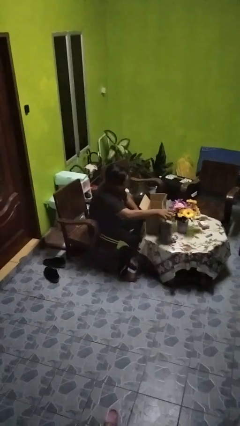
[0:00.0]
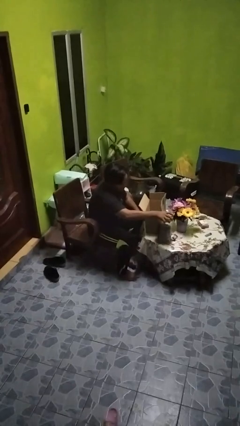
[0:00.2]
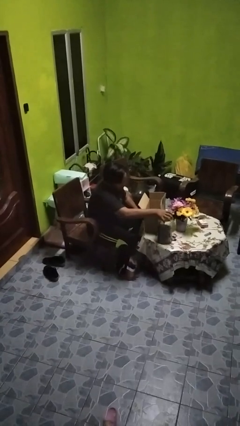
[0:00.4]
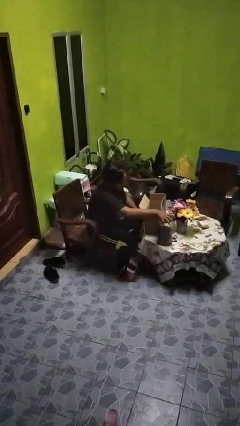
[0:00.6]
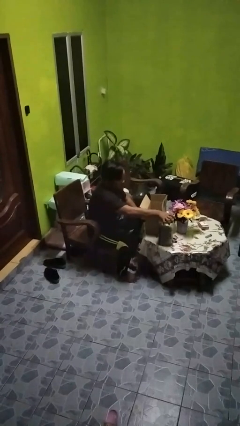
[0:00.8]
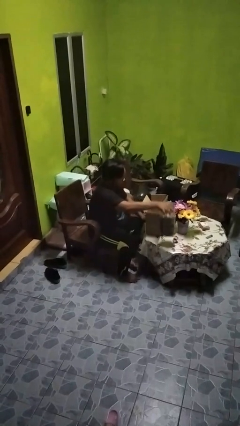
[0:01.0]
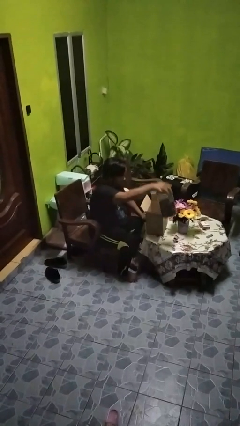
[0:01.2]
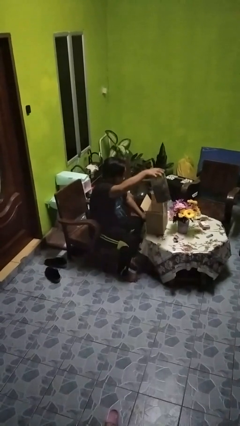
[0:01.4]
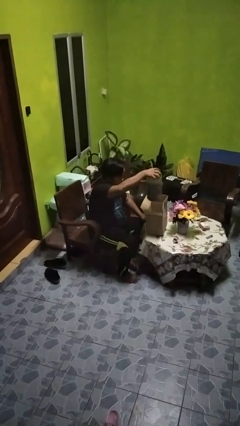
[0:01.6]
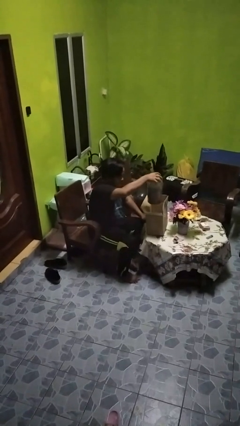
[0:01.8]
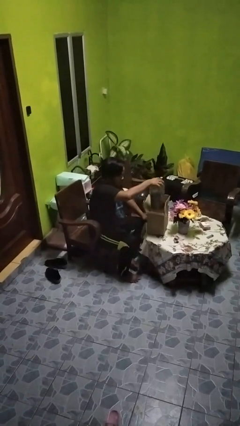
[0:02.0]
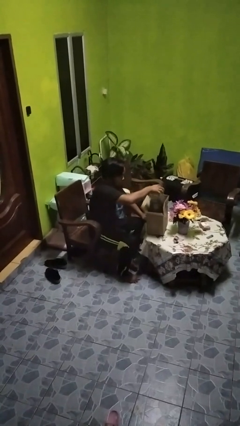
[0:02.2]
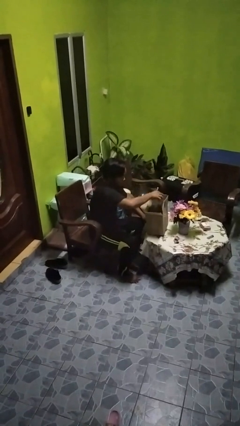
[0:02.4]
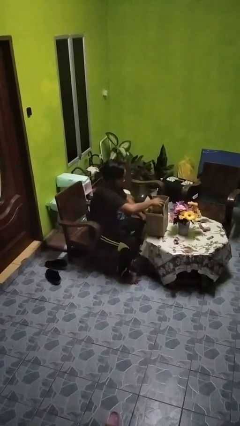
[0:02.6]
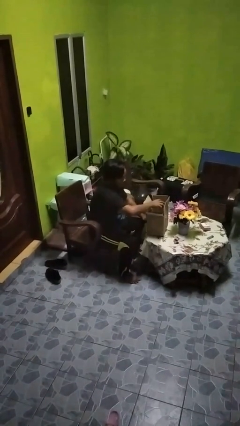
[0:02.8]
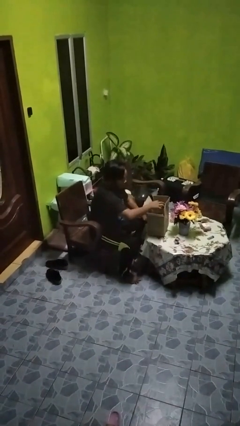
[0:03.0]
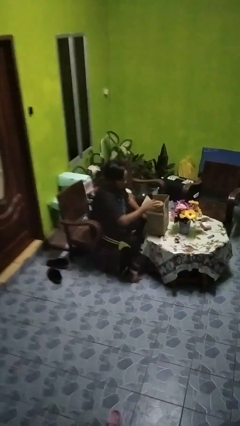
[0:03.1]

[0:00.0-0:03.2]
person puts object into box

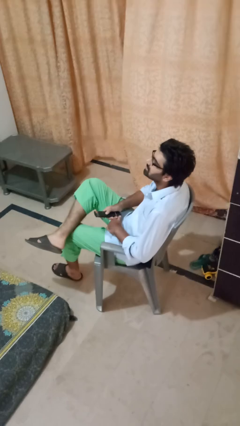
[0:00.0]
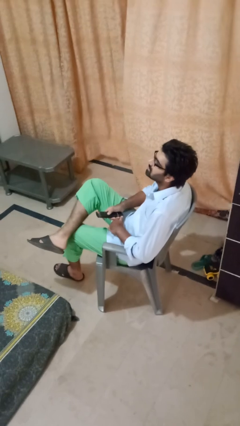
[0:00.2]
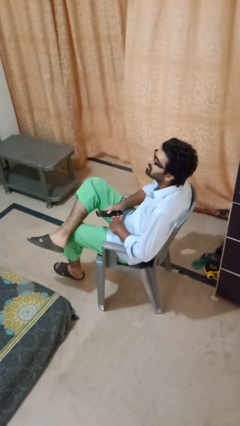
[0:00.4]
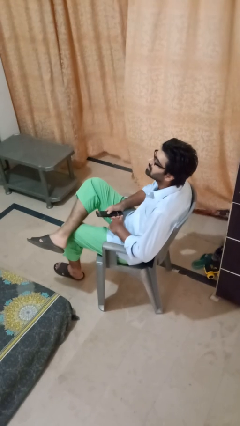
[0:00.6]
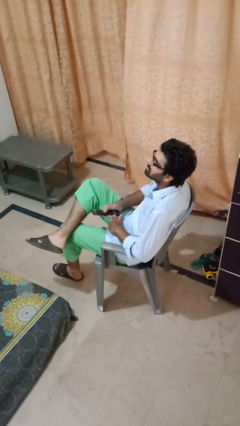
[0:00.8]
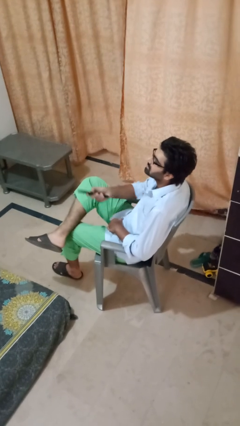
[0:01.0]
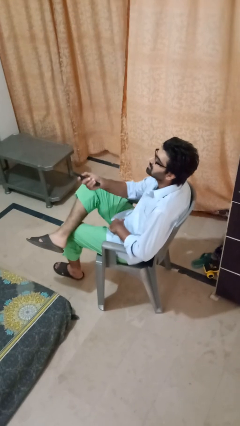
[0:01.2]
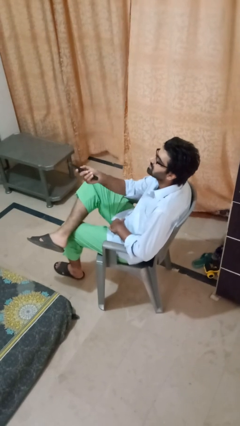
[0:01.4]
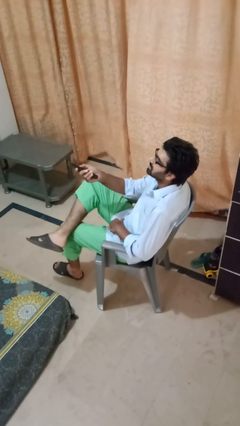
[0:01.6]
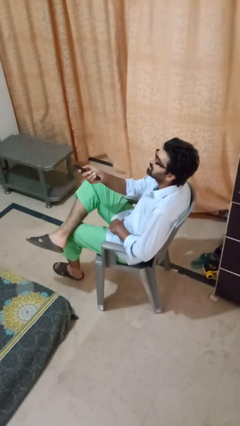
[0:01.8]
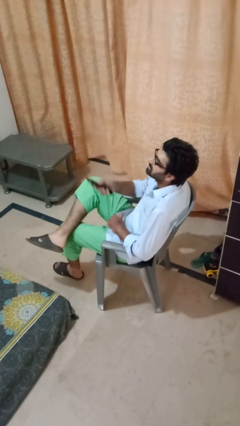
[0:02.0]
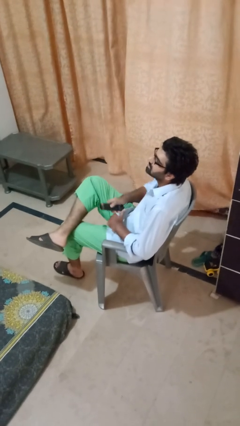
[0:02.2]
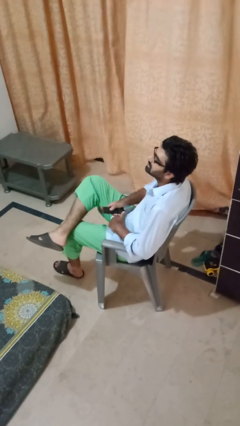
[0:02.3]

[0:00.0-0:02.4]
person uses television remote

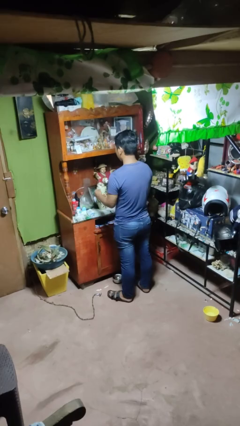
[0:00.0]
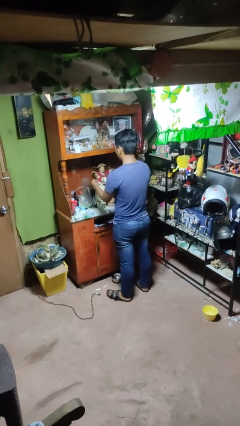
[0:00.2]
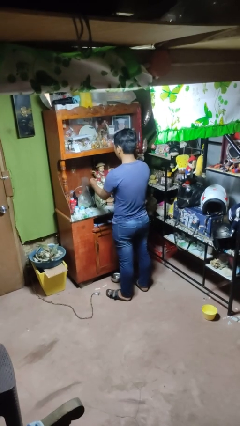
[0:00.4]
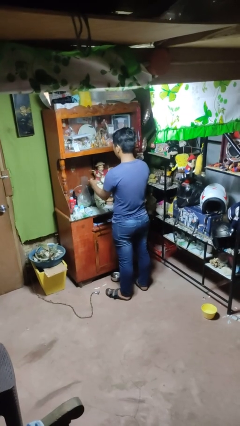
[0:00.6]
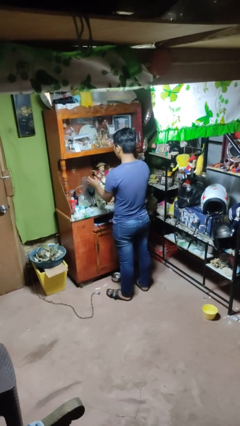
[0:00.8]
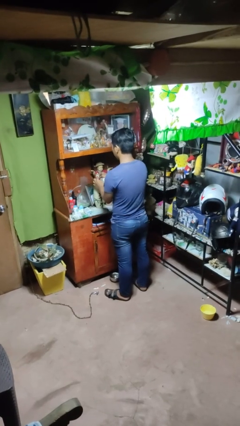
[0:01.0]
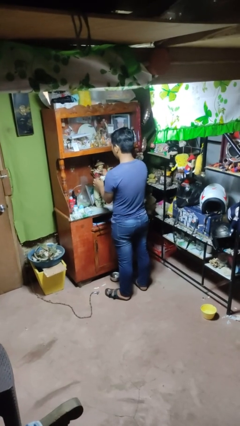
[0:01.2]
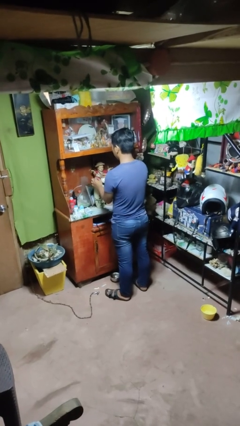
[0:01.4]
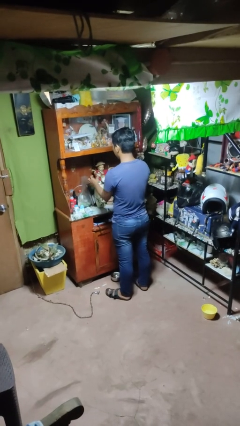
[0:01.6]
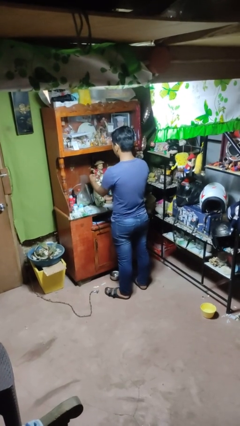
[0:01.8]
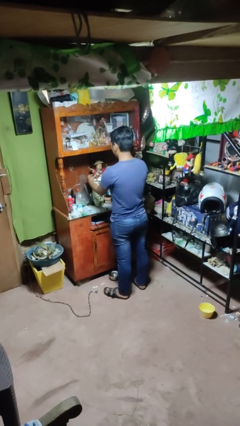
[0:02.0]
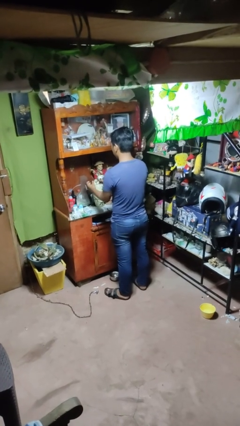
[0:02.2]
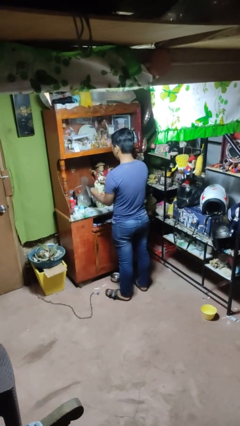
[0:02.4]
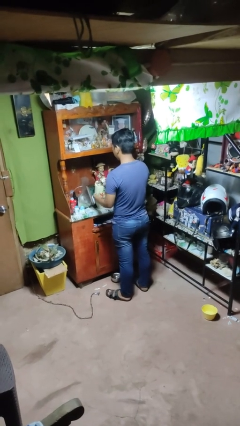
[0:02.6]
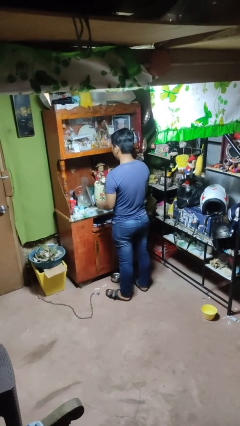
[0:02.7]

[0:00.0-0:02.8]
person arranges flowers in vase

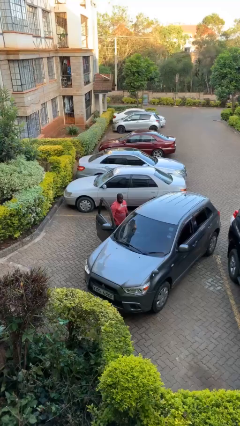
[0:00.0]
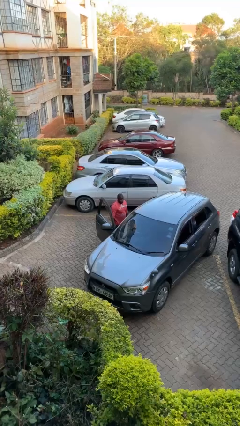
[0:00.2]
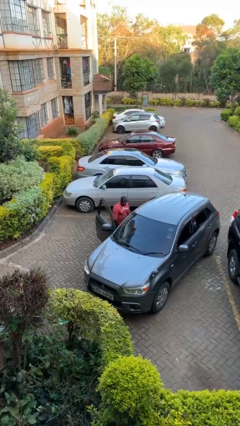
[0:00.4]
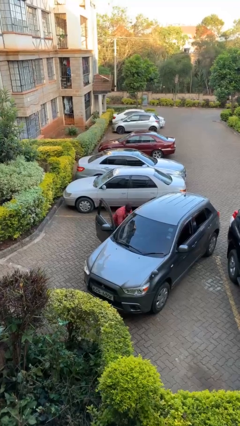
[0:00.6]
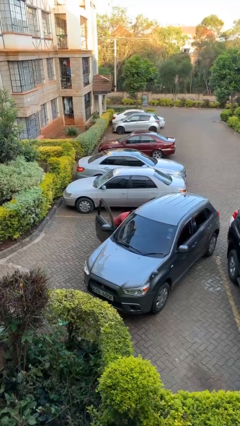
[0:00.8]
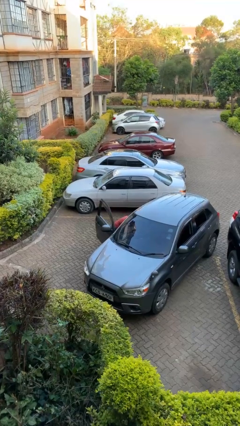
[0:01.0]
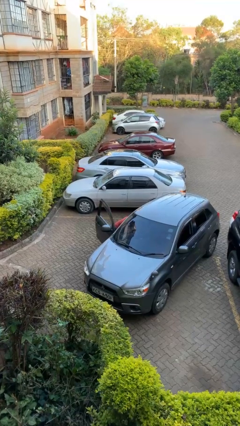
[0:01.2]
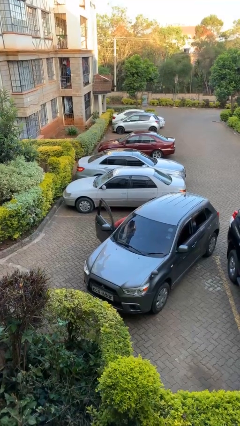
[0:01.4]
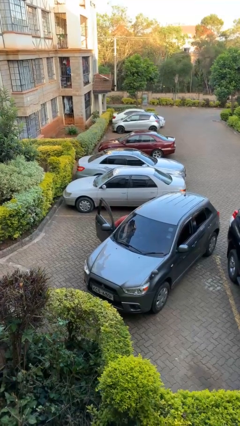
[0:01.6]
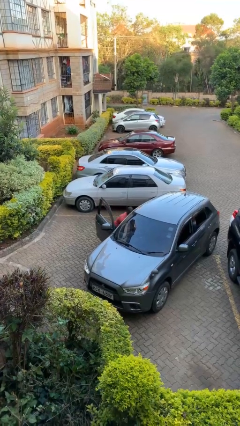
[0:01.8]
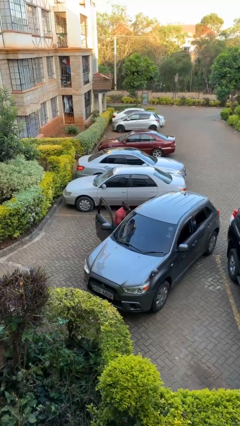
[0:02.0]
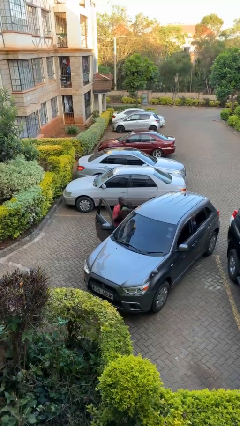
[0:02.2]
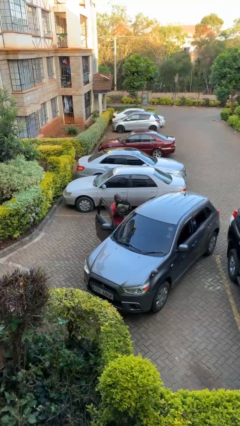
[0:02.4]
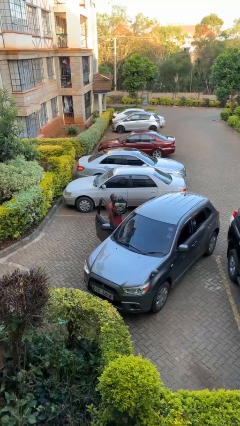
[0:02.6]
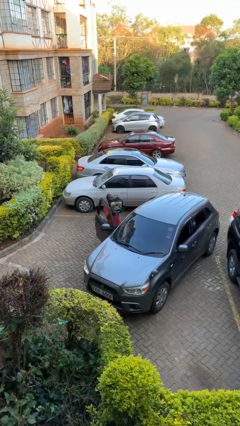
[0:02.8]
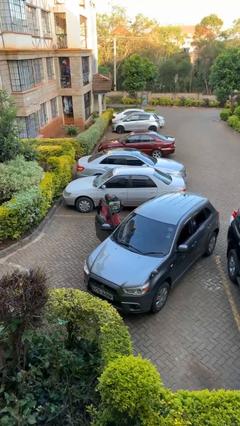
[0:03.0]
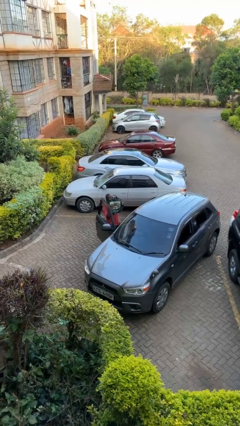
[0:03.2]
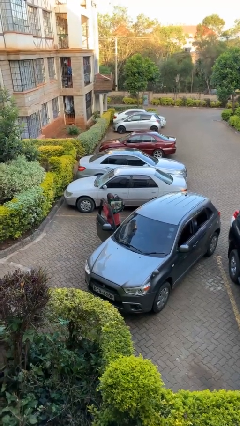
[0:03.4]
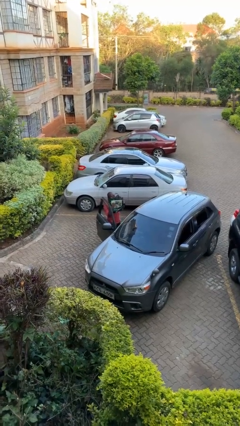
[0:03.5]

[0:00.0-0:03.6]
person unloads car

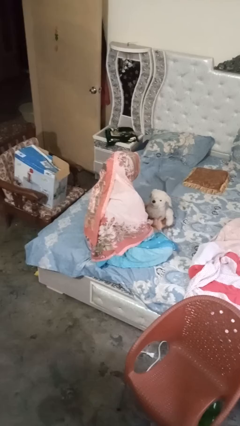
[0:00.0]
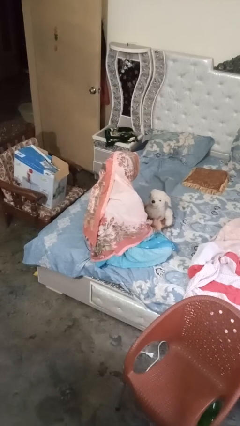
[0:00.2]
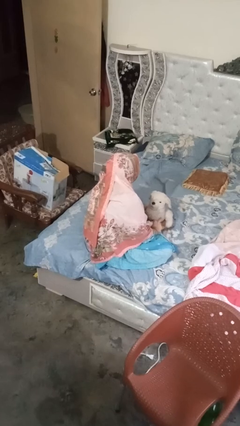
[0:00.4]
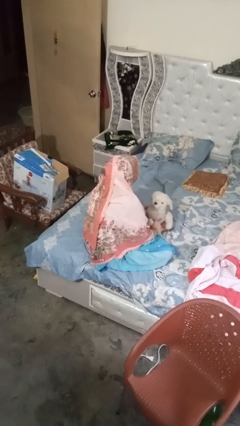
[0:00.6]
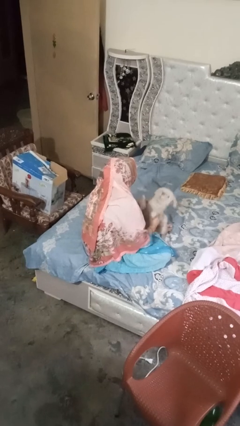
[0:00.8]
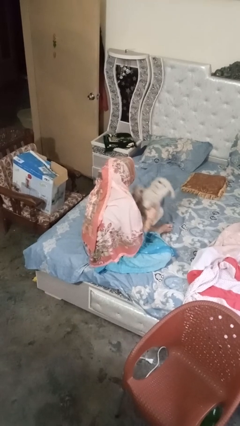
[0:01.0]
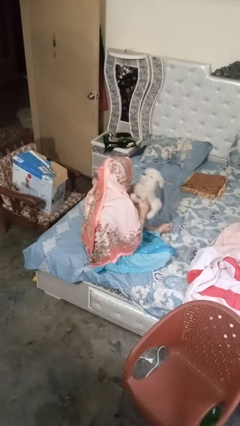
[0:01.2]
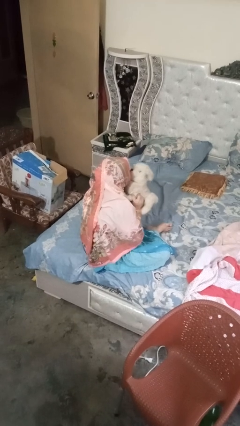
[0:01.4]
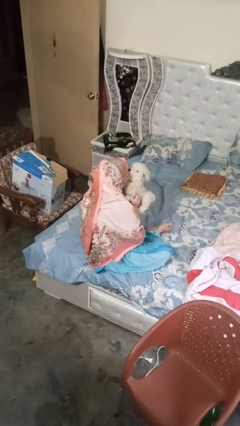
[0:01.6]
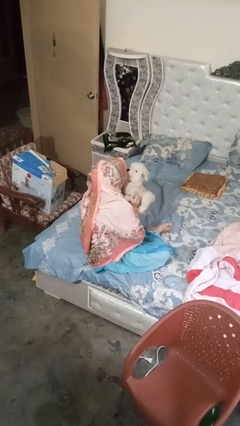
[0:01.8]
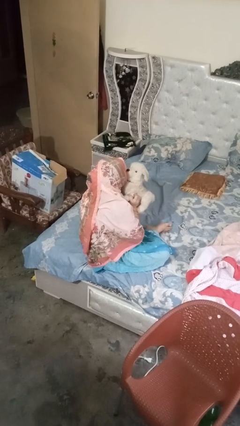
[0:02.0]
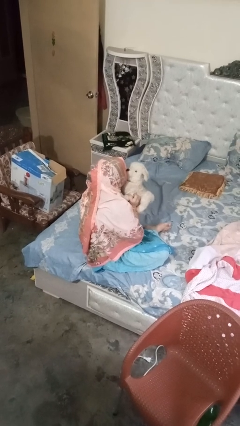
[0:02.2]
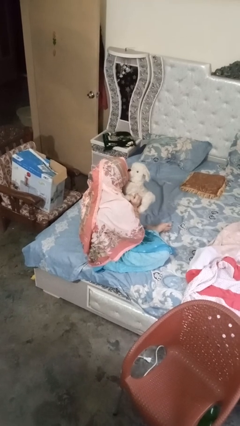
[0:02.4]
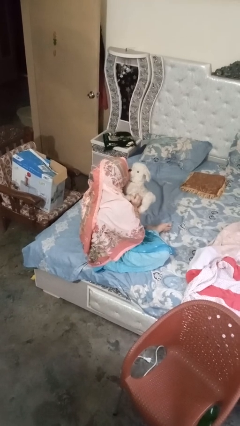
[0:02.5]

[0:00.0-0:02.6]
person hugs stuffed animal

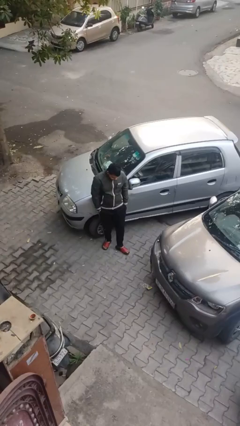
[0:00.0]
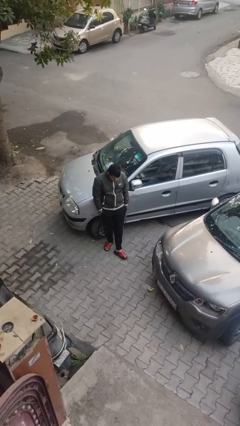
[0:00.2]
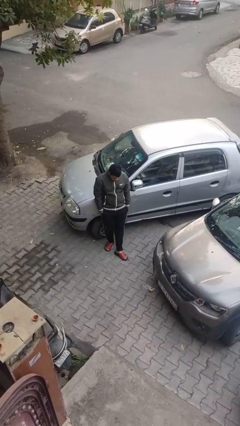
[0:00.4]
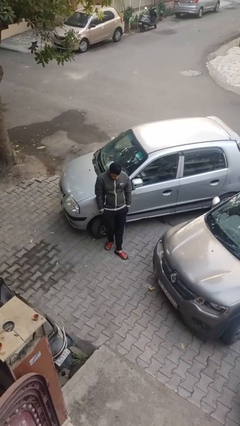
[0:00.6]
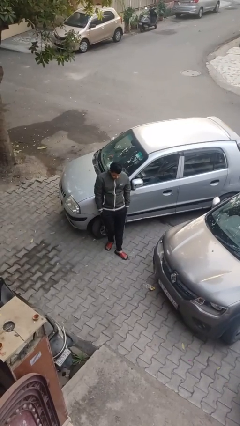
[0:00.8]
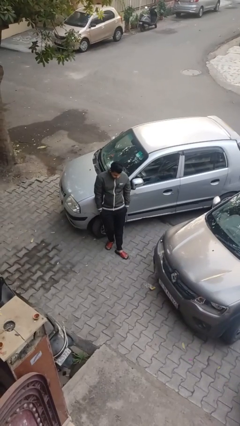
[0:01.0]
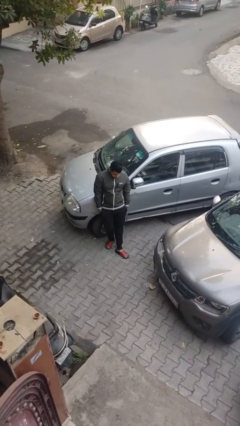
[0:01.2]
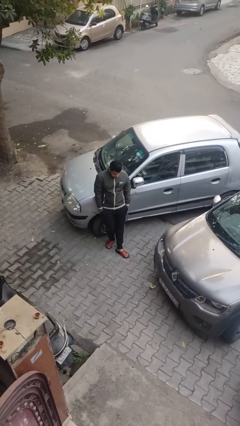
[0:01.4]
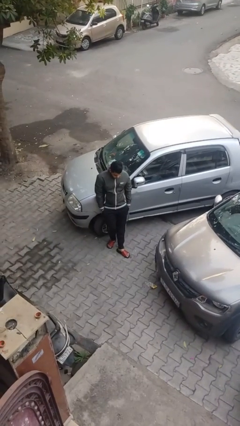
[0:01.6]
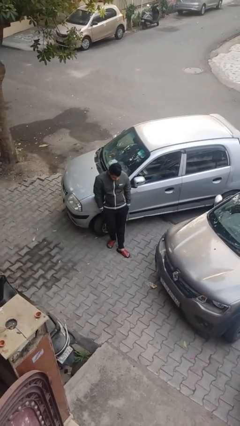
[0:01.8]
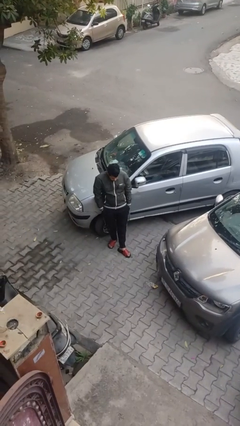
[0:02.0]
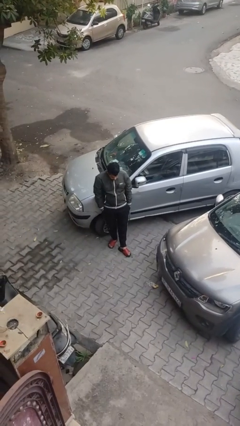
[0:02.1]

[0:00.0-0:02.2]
person leans against car

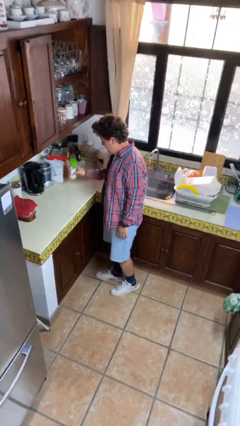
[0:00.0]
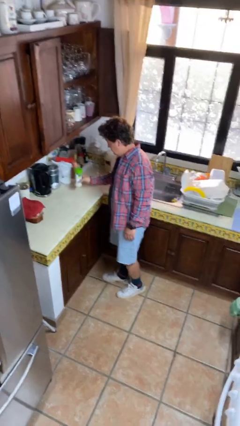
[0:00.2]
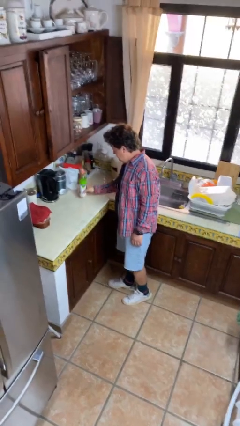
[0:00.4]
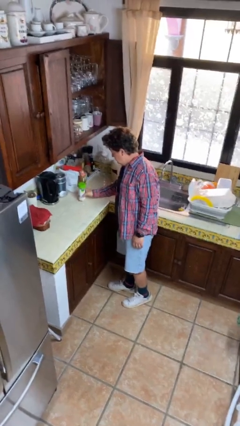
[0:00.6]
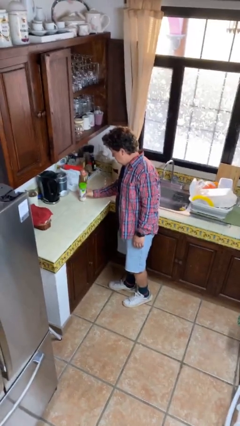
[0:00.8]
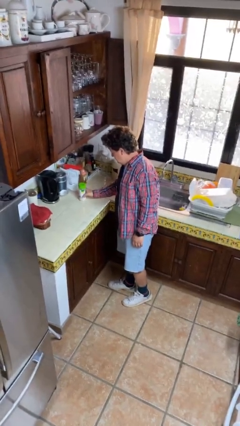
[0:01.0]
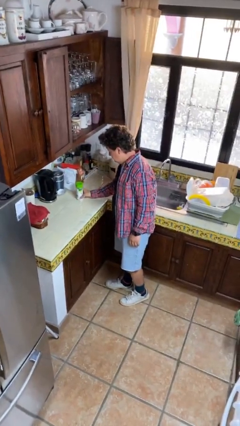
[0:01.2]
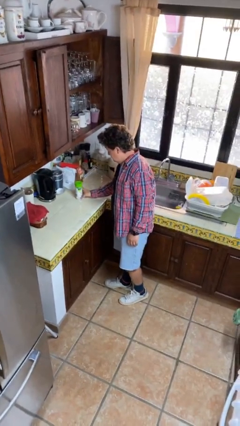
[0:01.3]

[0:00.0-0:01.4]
person puts down object on table
